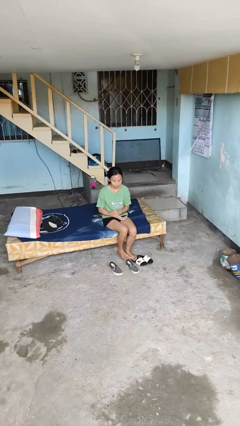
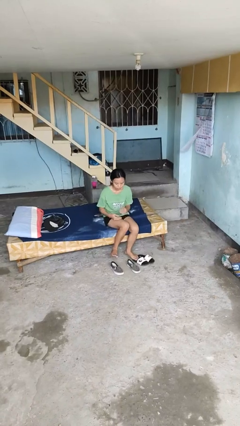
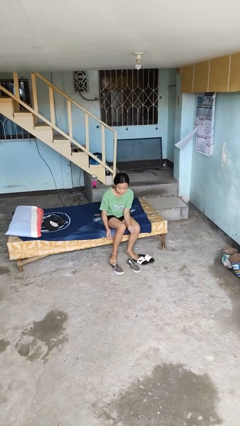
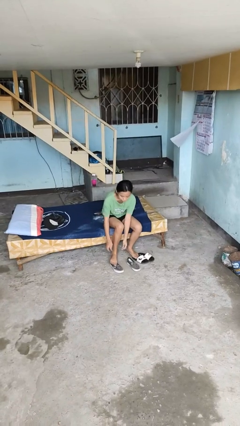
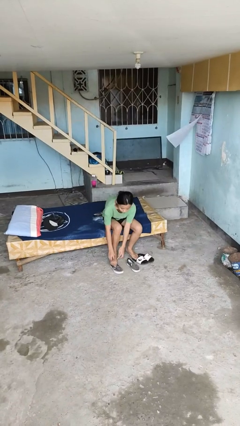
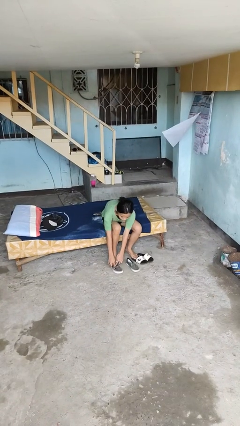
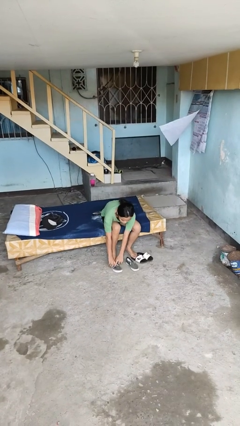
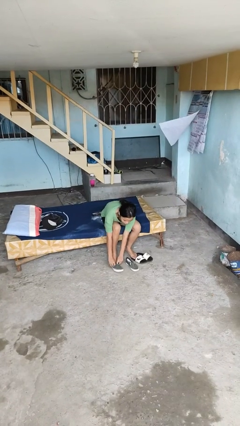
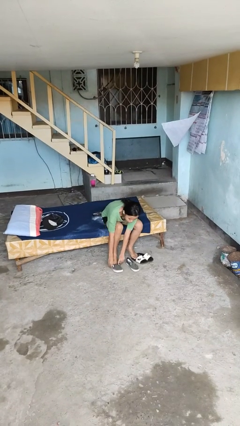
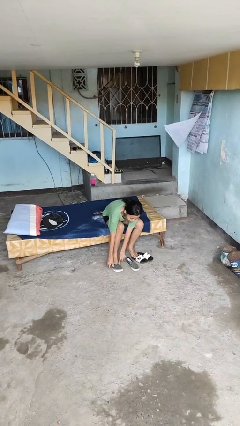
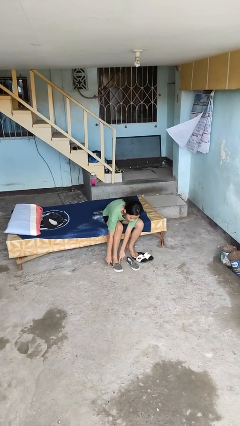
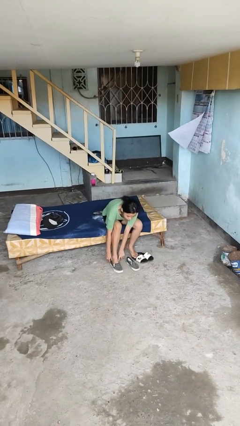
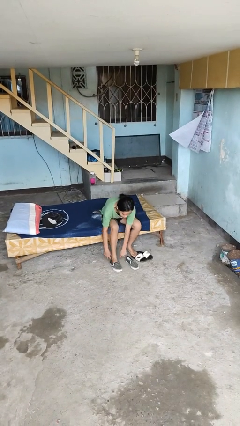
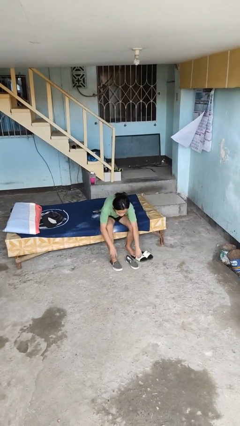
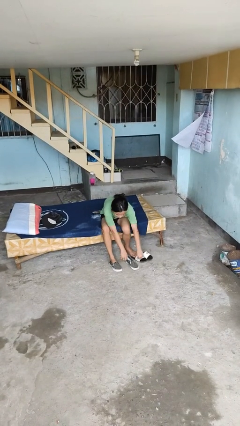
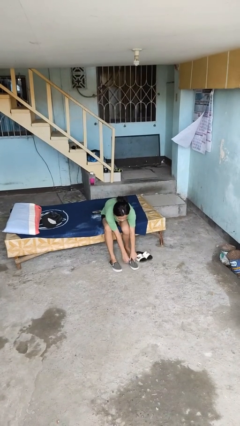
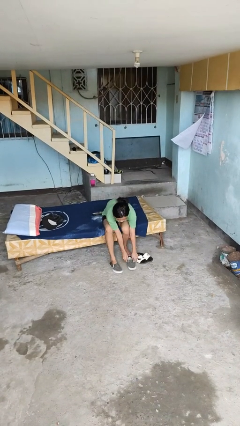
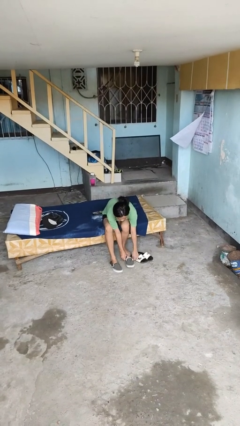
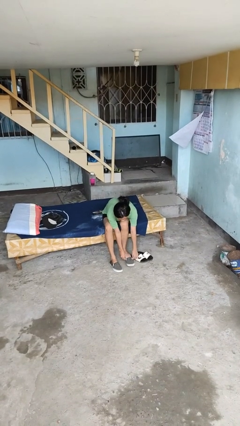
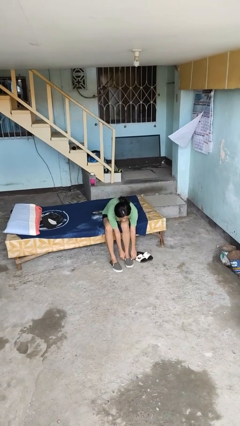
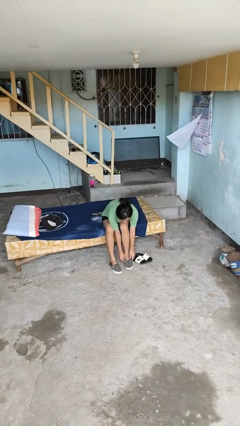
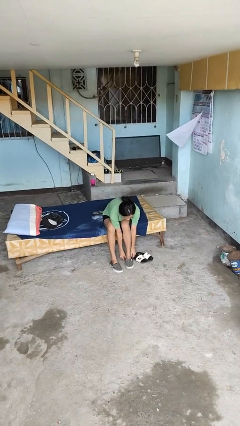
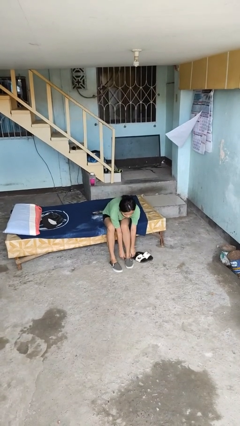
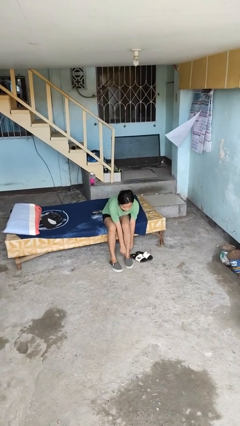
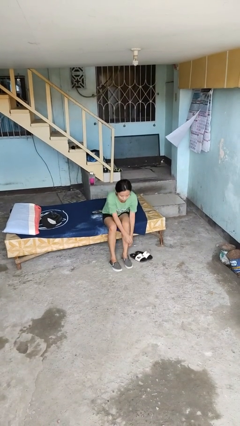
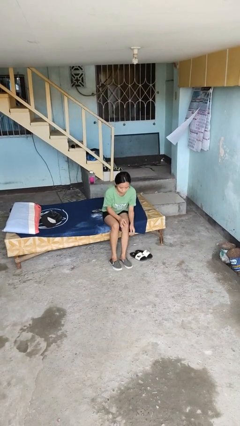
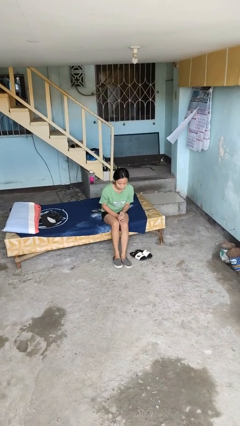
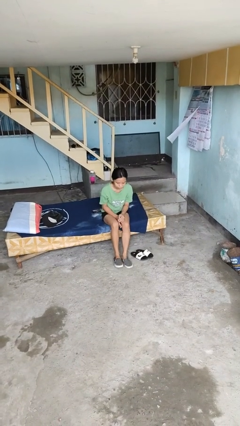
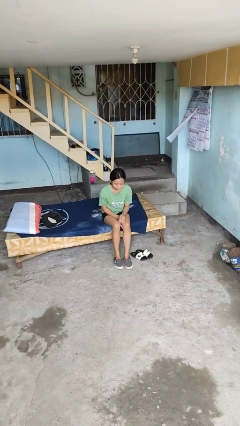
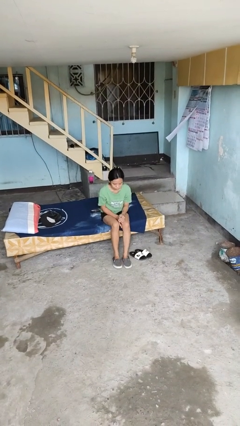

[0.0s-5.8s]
person puts on shoes

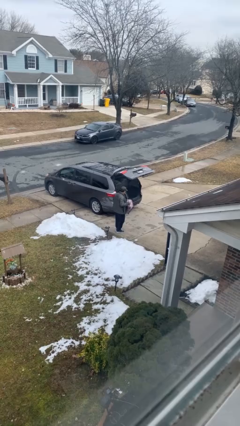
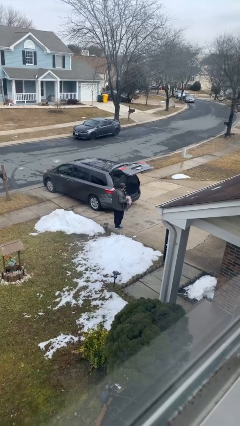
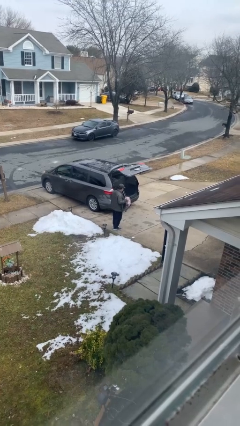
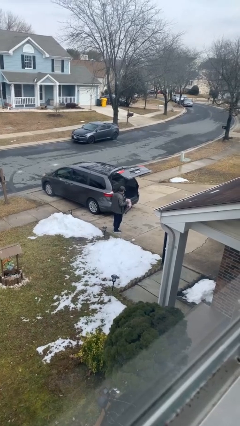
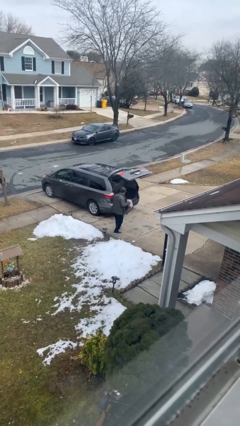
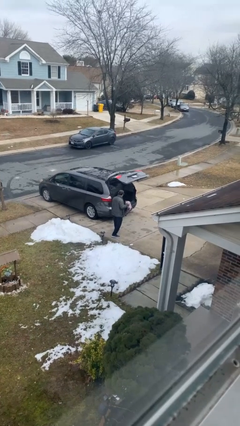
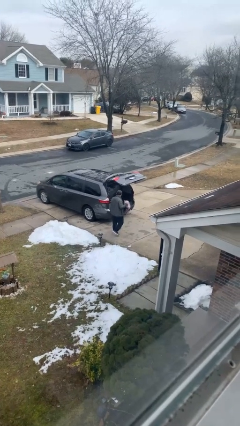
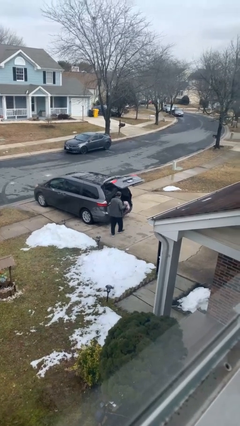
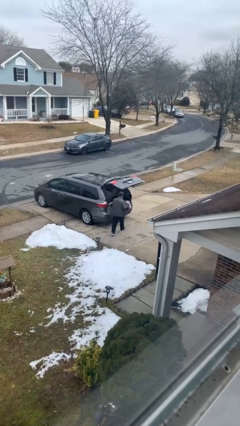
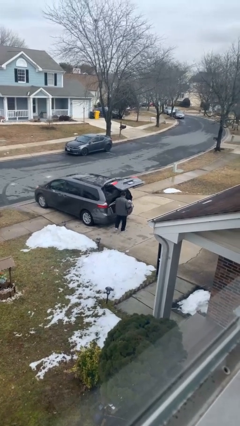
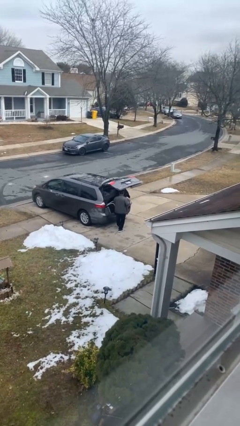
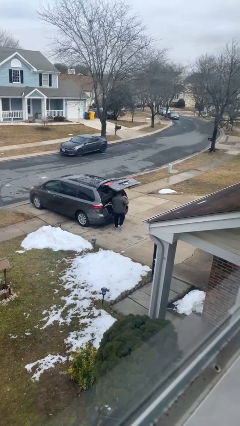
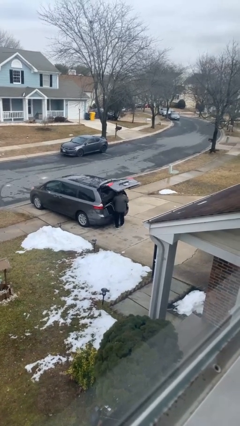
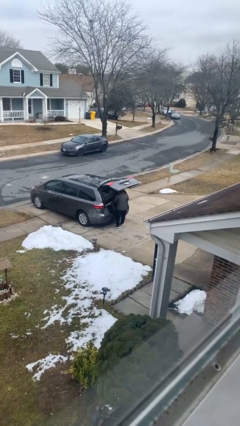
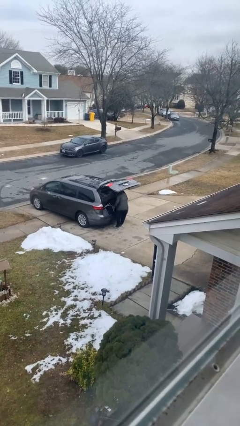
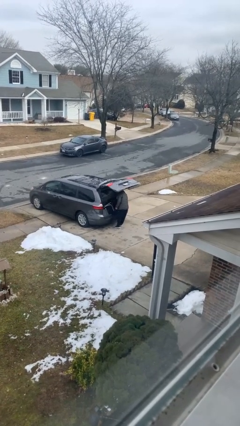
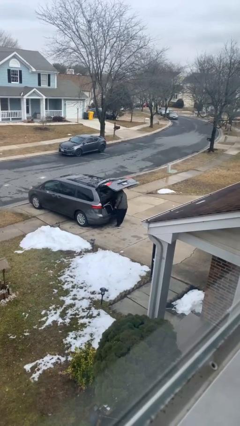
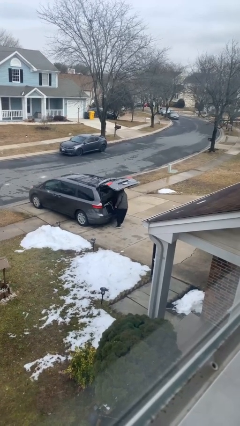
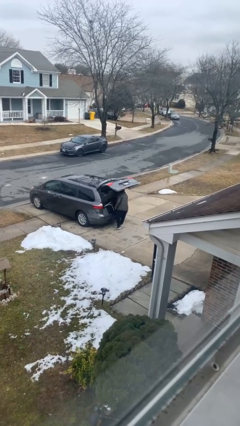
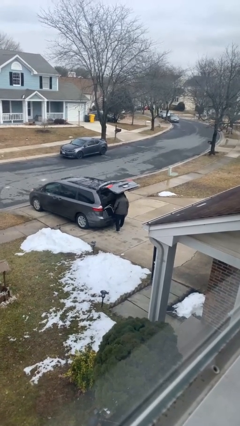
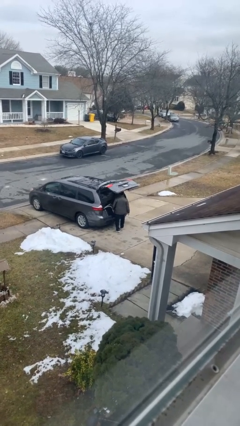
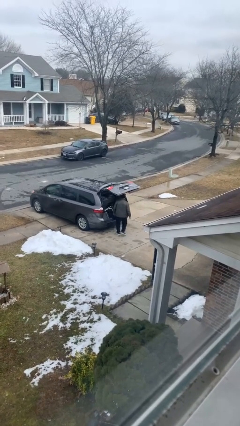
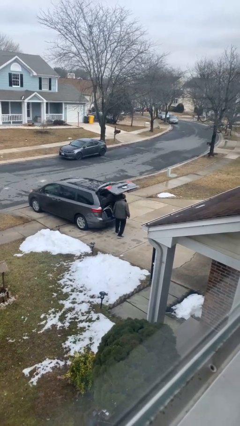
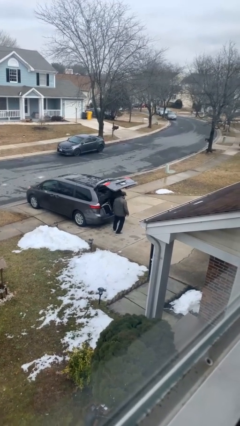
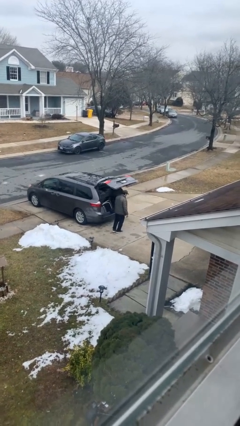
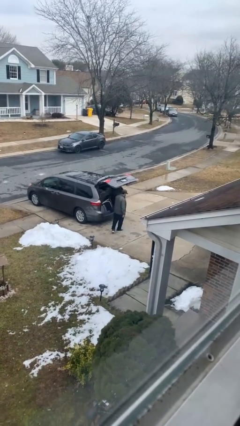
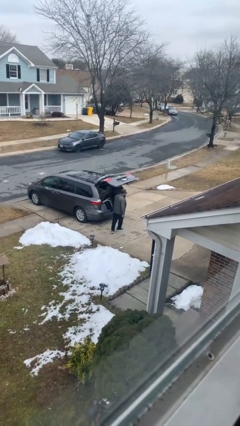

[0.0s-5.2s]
person loads car

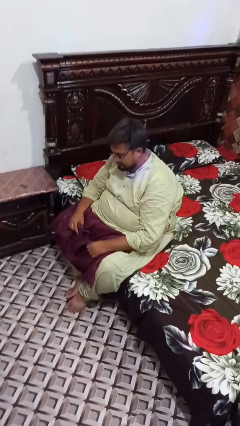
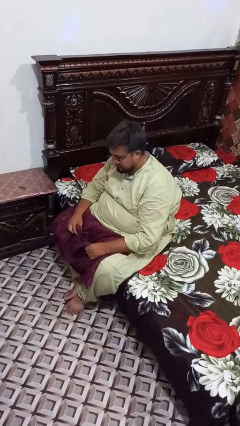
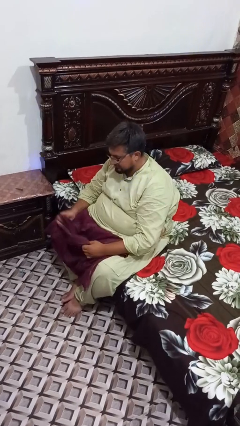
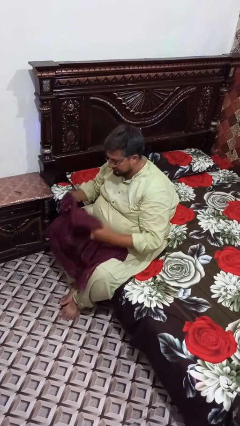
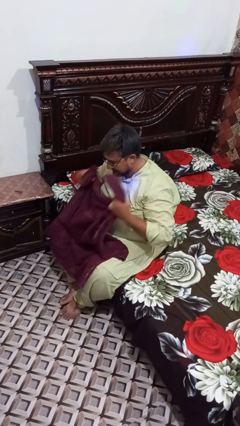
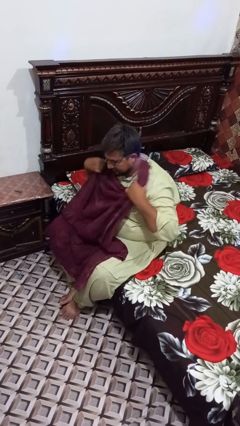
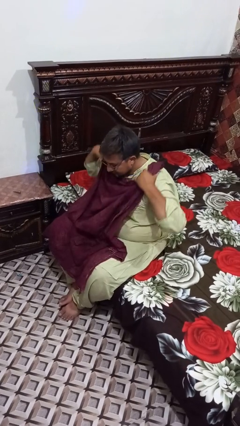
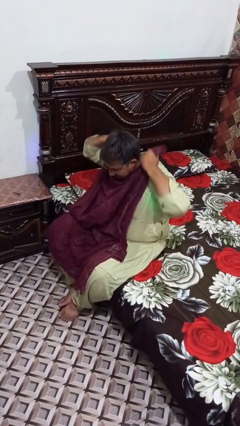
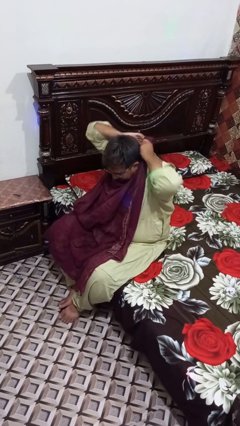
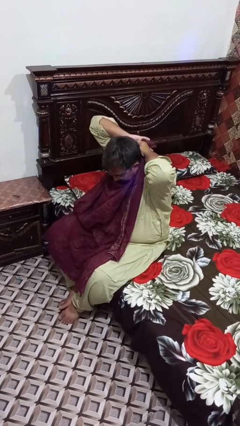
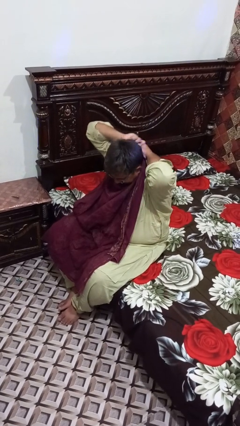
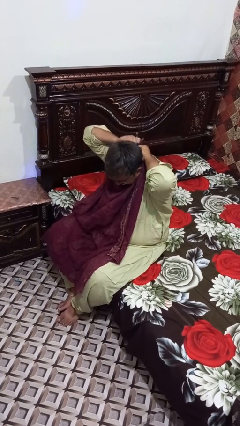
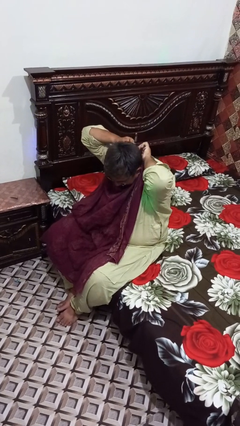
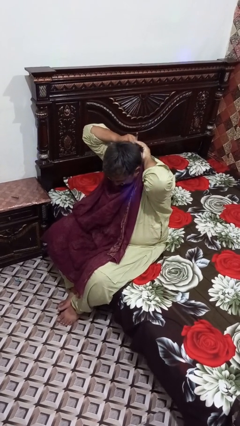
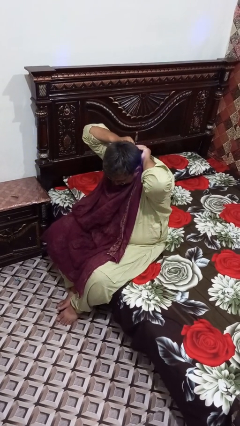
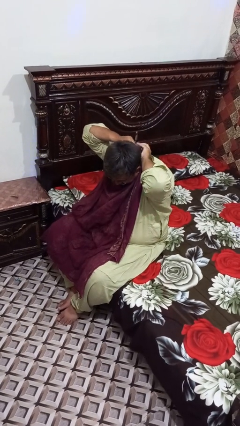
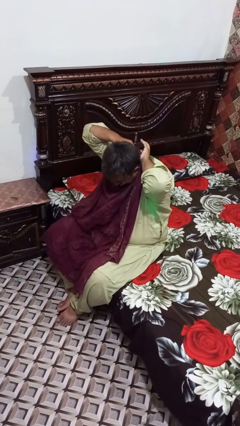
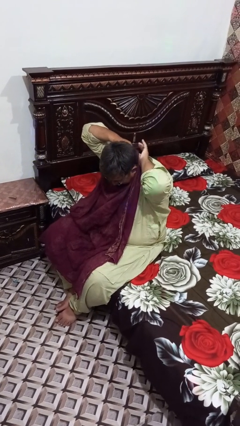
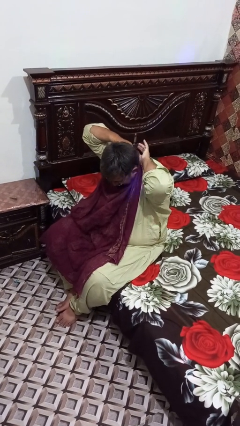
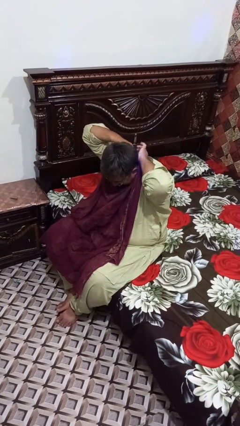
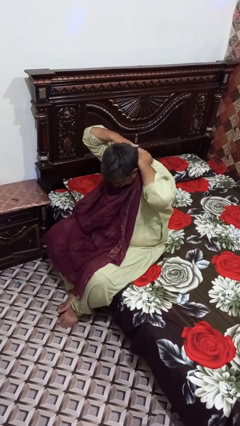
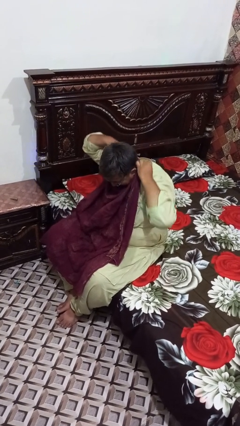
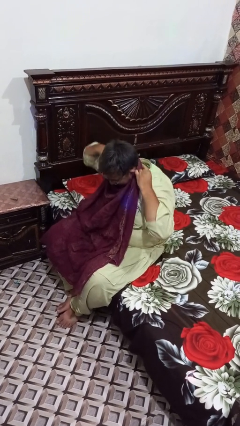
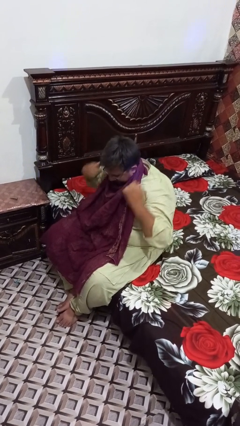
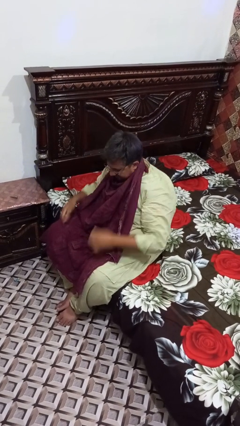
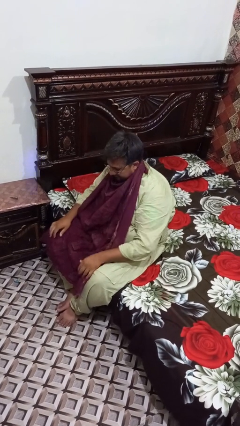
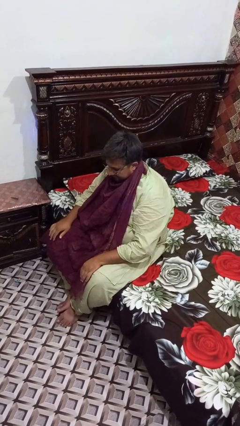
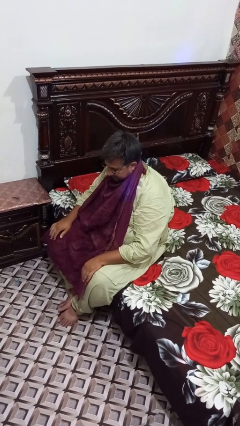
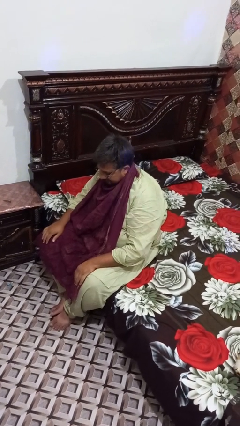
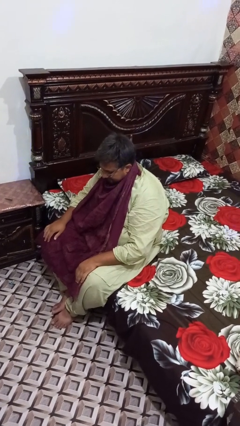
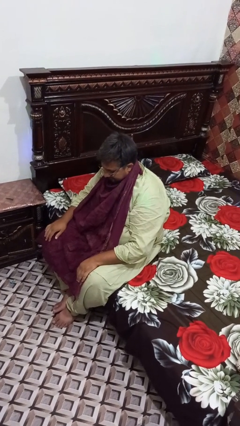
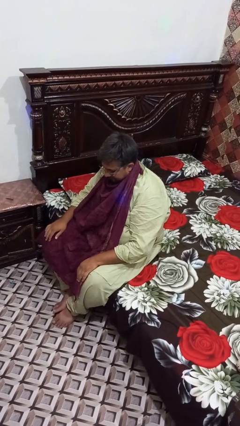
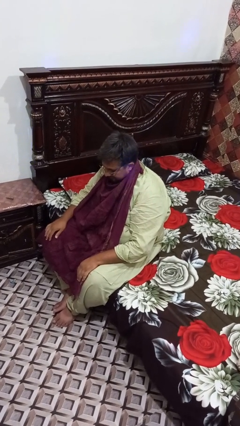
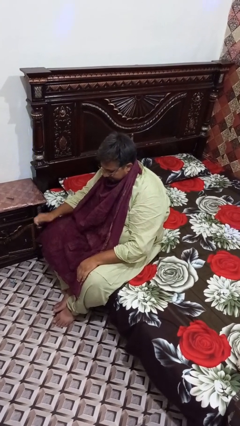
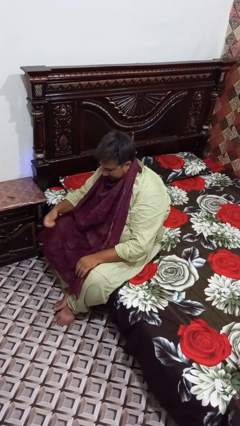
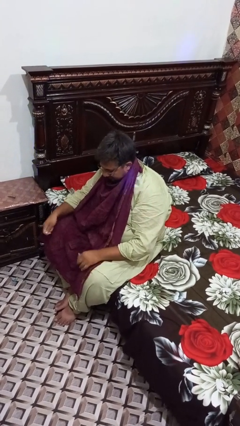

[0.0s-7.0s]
person puts on apron
